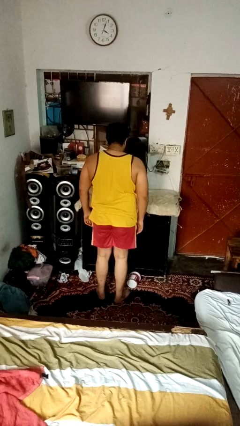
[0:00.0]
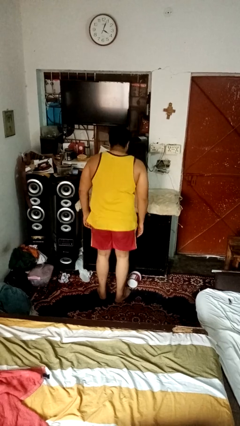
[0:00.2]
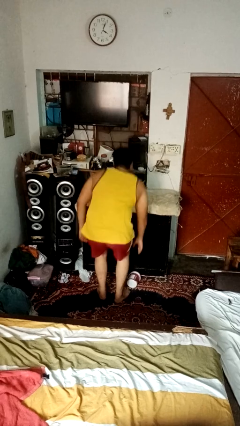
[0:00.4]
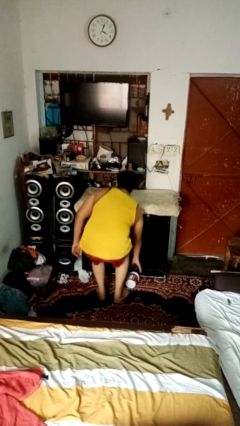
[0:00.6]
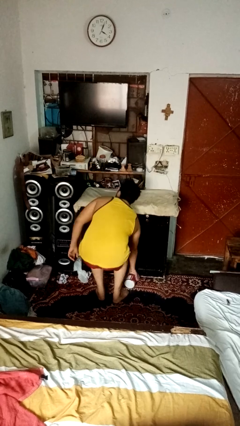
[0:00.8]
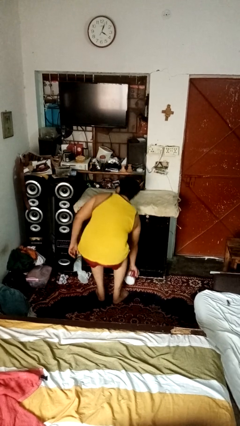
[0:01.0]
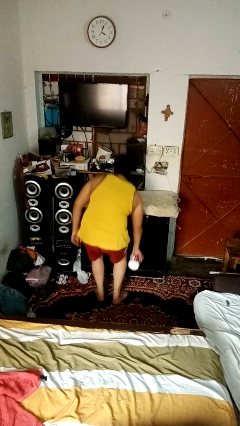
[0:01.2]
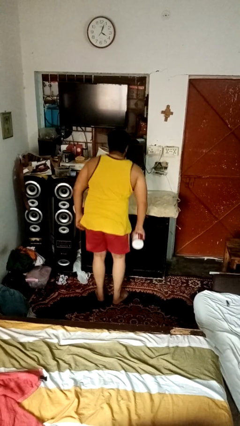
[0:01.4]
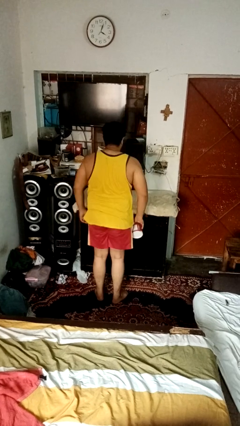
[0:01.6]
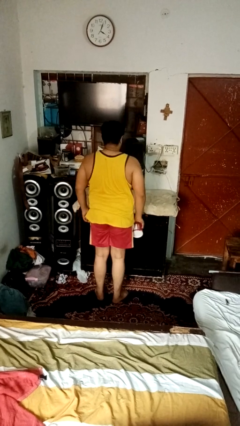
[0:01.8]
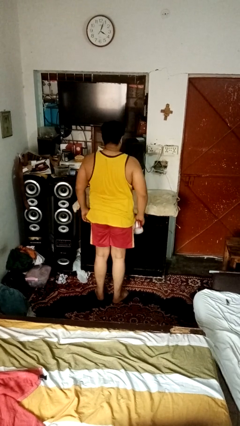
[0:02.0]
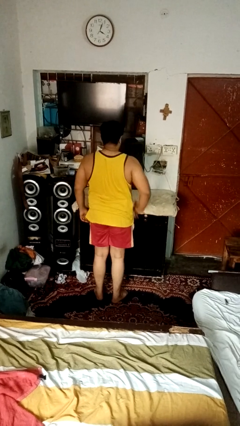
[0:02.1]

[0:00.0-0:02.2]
person sets upright furniture

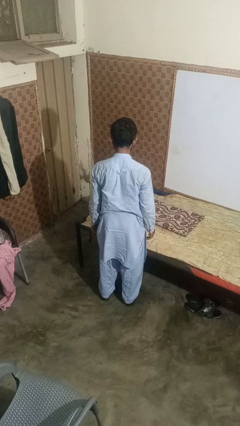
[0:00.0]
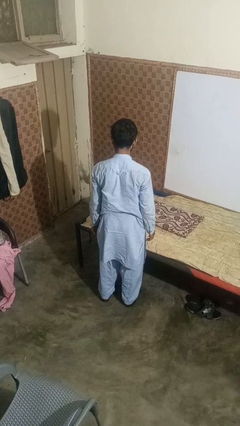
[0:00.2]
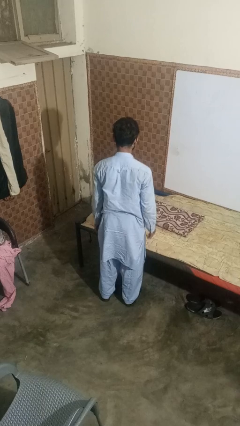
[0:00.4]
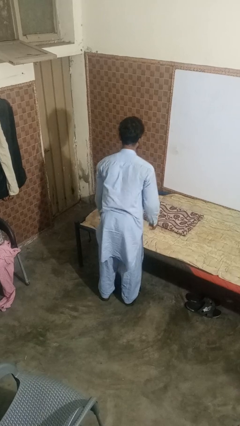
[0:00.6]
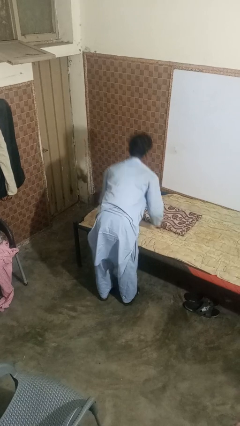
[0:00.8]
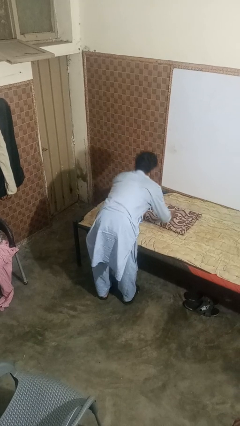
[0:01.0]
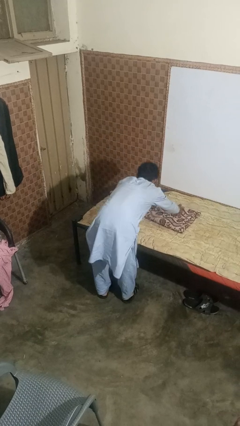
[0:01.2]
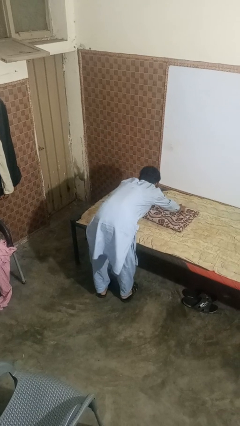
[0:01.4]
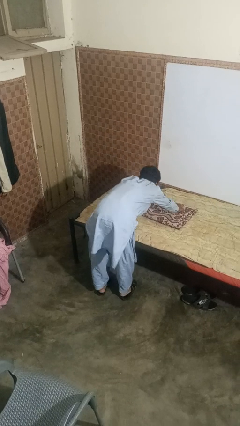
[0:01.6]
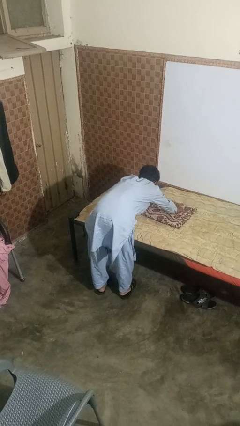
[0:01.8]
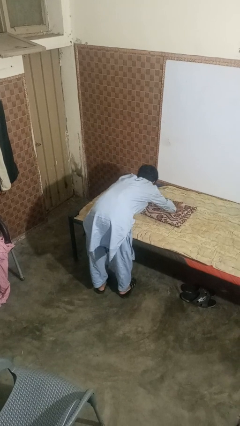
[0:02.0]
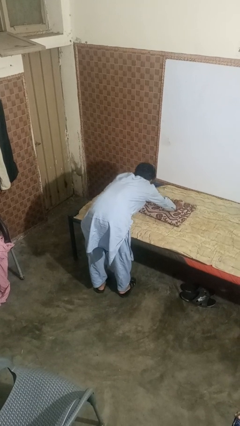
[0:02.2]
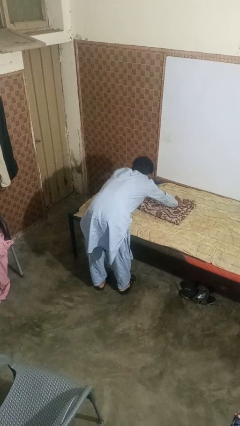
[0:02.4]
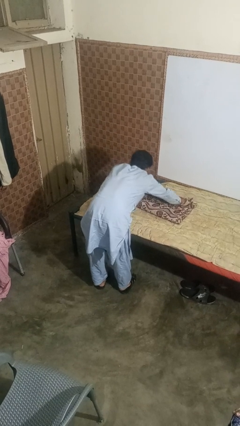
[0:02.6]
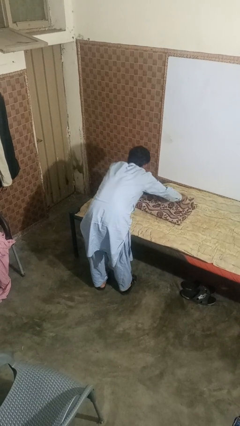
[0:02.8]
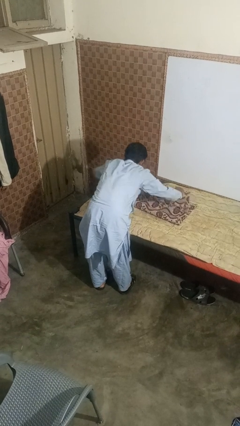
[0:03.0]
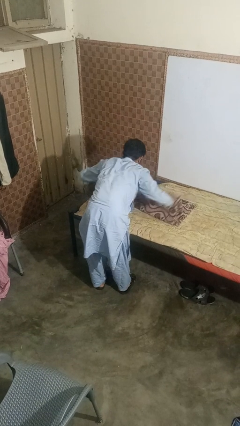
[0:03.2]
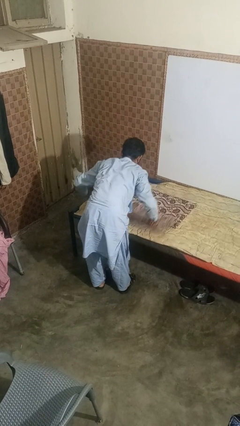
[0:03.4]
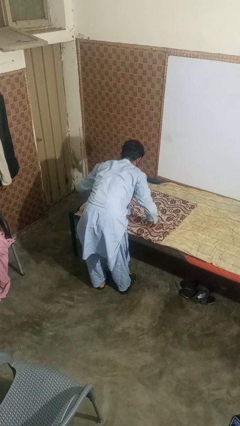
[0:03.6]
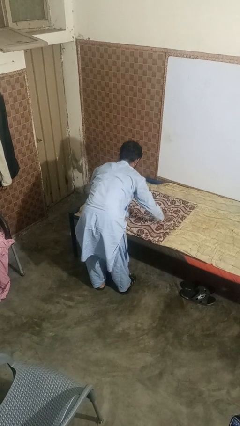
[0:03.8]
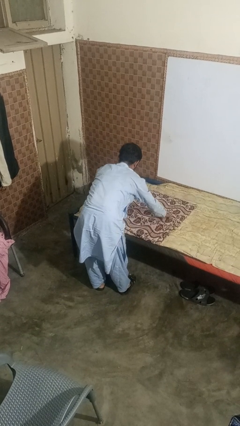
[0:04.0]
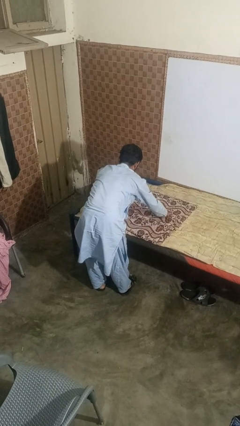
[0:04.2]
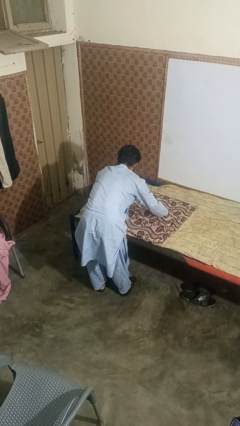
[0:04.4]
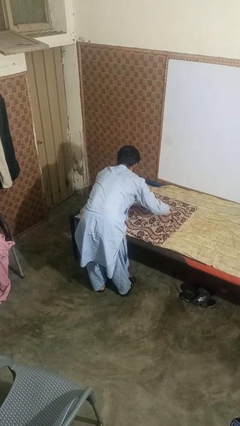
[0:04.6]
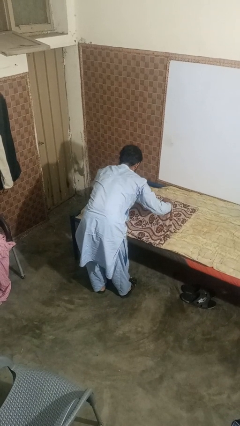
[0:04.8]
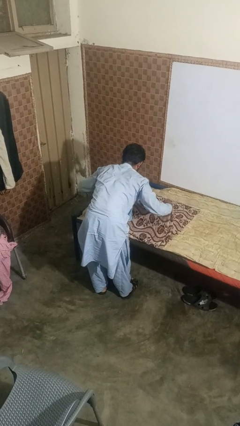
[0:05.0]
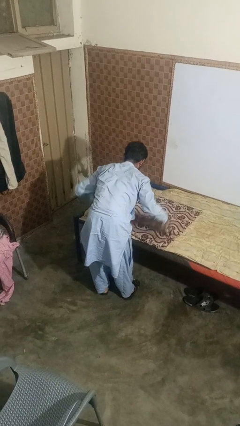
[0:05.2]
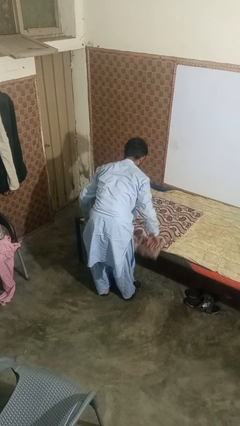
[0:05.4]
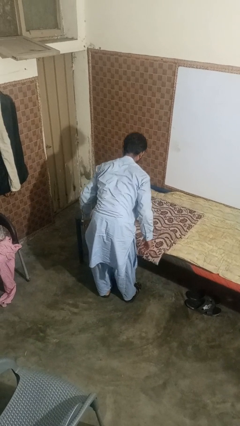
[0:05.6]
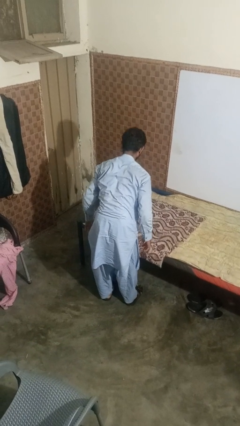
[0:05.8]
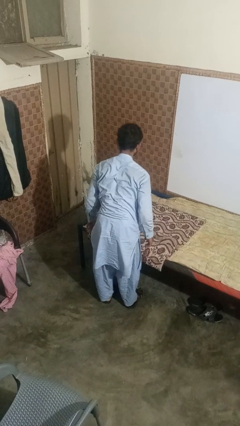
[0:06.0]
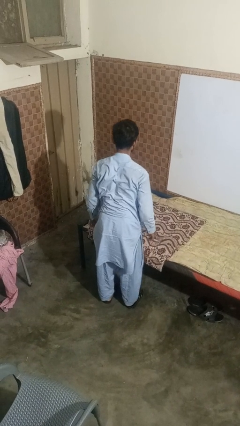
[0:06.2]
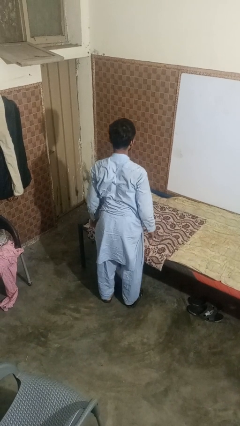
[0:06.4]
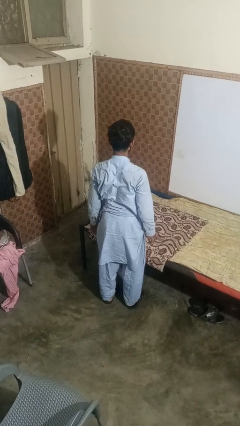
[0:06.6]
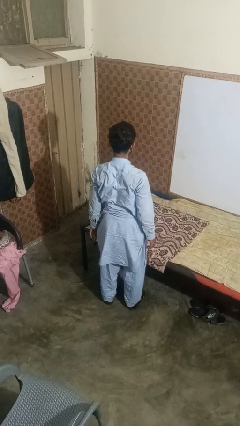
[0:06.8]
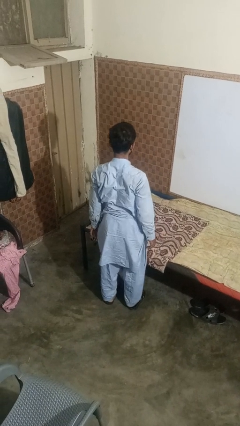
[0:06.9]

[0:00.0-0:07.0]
person unfolds blanket

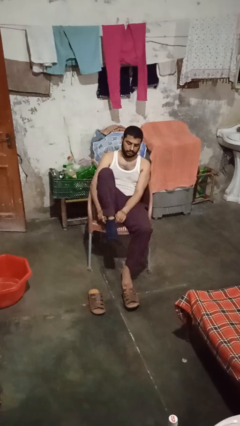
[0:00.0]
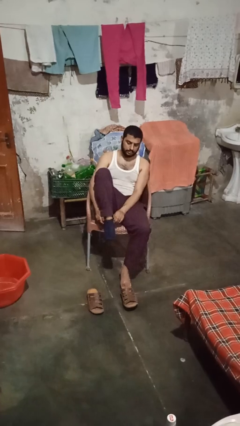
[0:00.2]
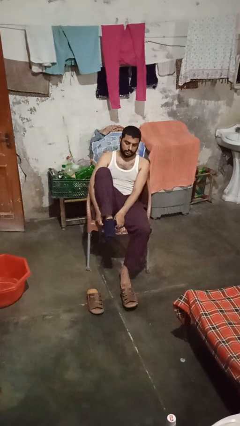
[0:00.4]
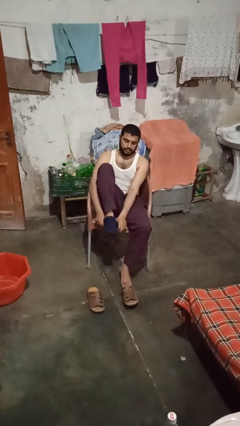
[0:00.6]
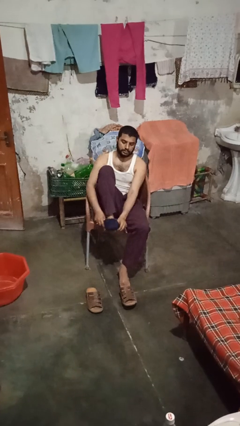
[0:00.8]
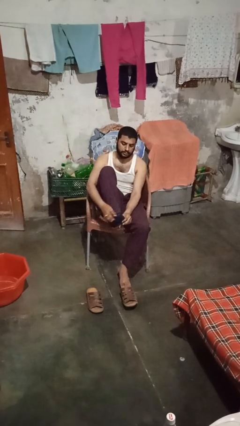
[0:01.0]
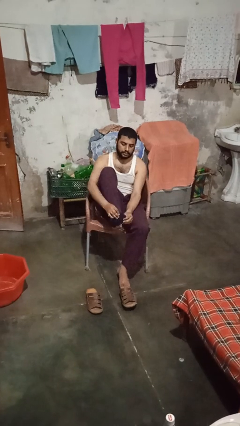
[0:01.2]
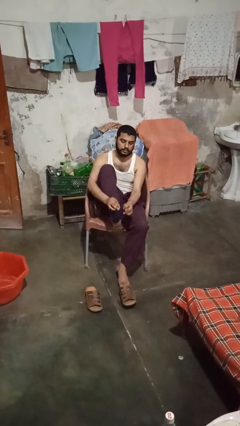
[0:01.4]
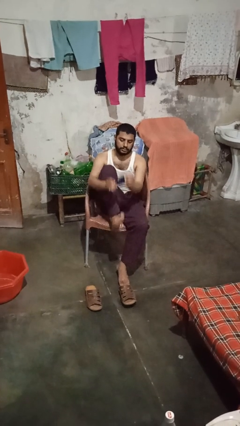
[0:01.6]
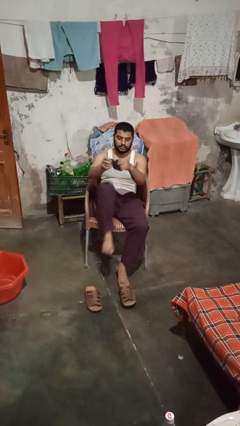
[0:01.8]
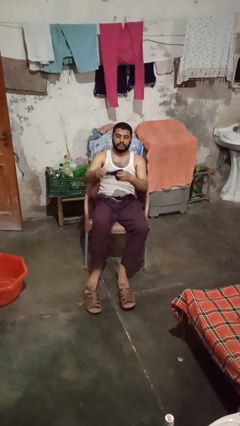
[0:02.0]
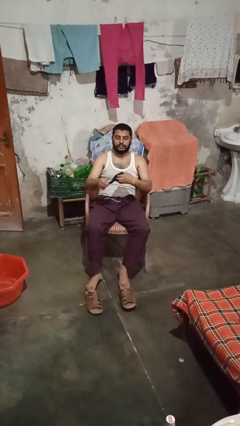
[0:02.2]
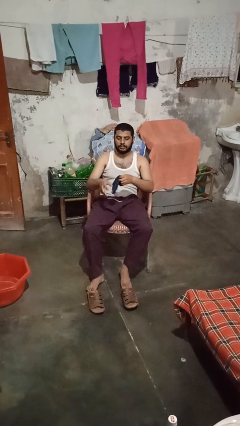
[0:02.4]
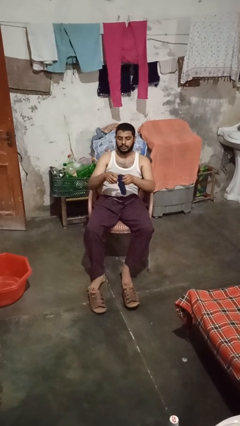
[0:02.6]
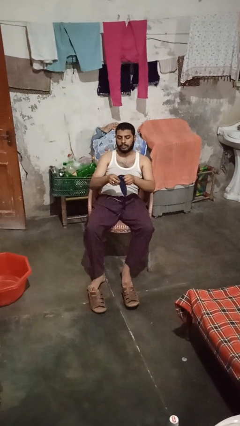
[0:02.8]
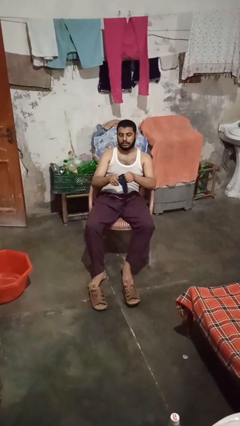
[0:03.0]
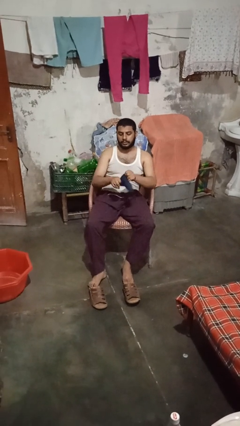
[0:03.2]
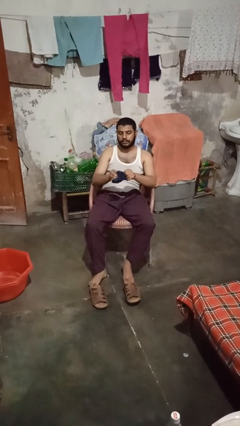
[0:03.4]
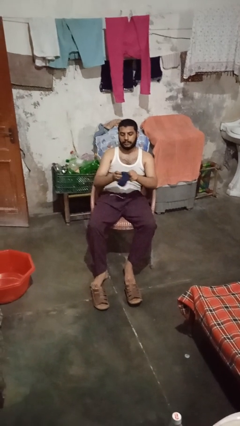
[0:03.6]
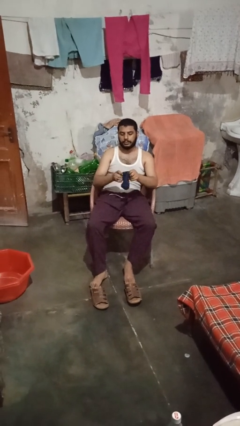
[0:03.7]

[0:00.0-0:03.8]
person takes off socks

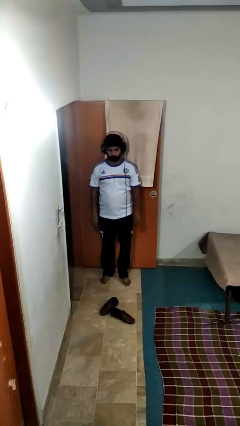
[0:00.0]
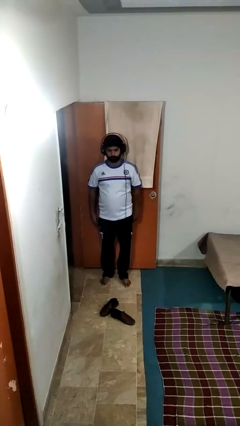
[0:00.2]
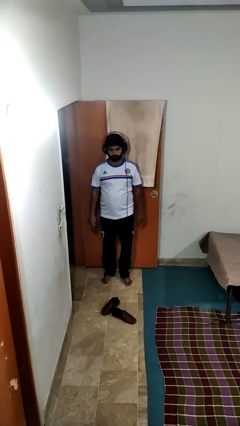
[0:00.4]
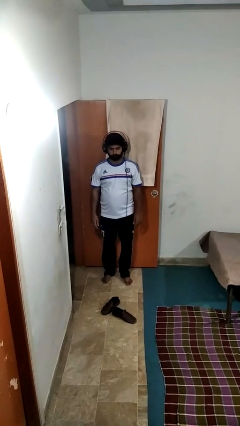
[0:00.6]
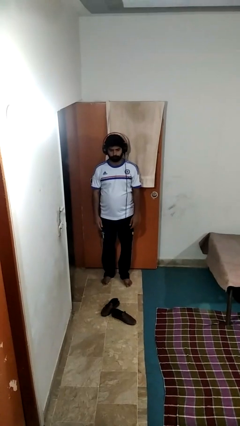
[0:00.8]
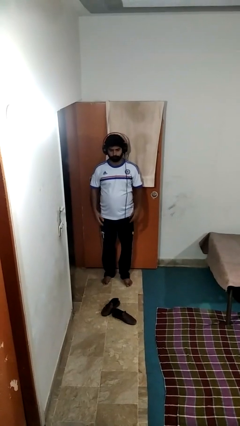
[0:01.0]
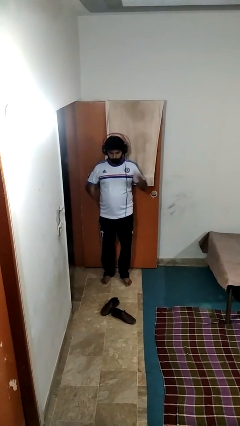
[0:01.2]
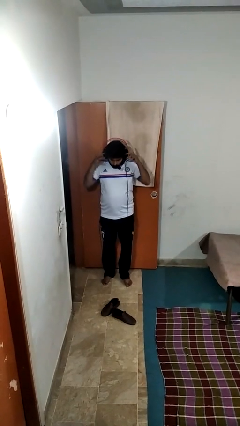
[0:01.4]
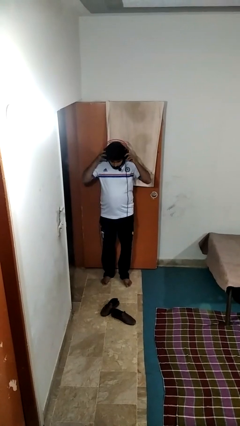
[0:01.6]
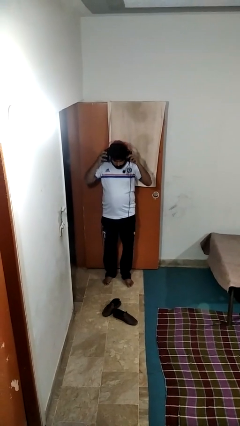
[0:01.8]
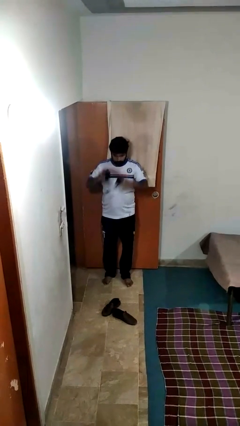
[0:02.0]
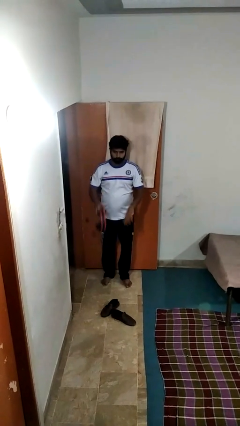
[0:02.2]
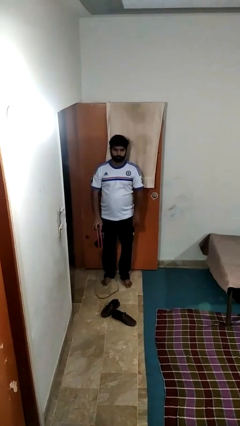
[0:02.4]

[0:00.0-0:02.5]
person takes off headphones

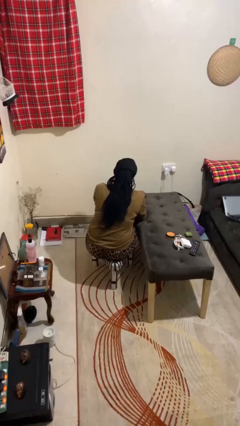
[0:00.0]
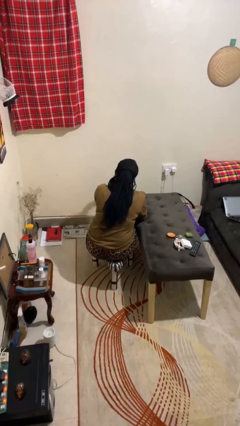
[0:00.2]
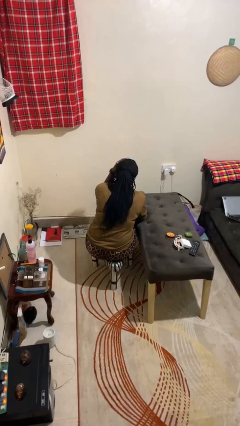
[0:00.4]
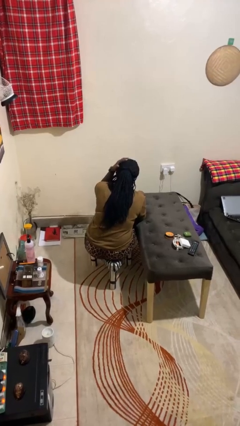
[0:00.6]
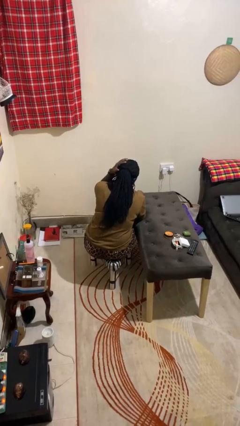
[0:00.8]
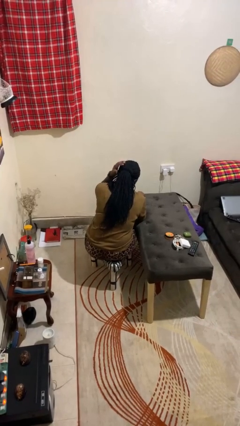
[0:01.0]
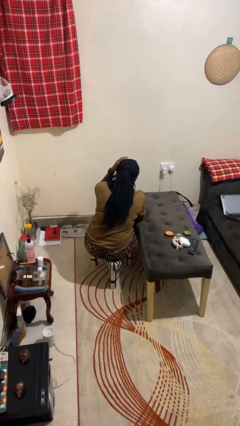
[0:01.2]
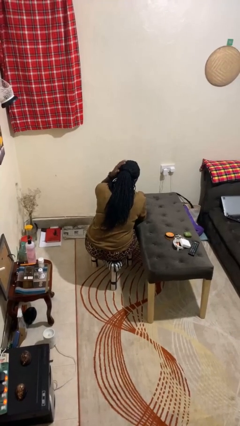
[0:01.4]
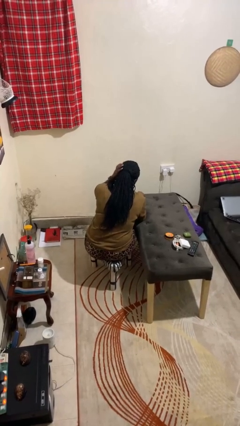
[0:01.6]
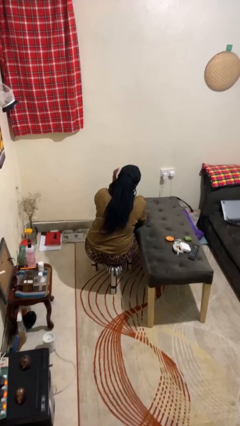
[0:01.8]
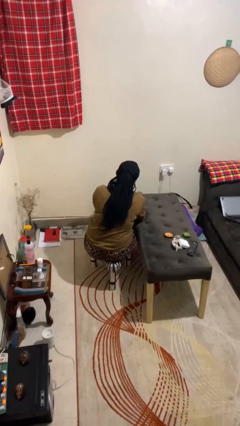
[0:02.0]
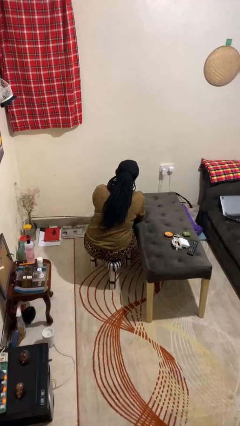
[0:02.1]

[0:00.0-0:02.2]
person strokes hair
